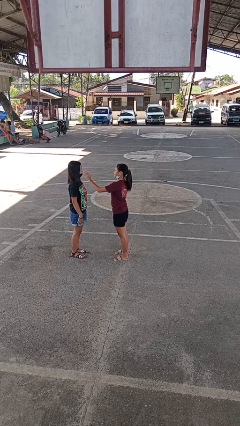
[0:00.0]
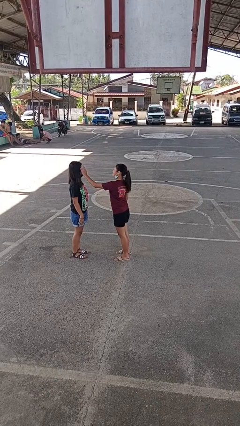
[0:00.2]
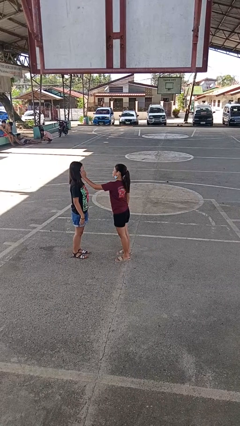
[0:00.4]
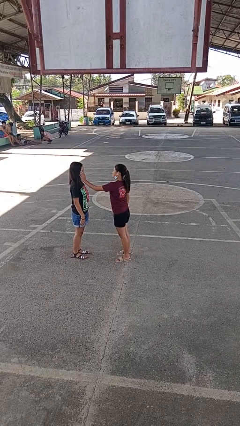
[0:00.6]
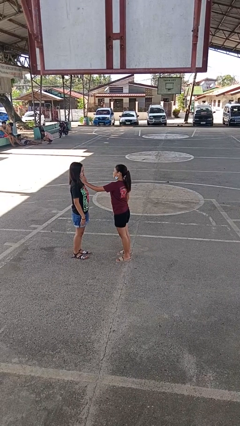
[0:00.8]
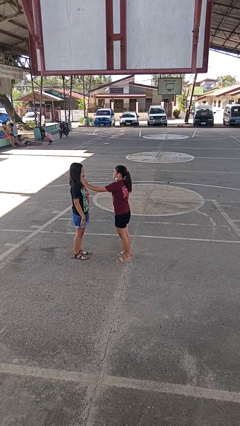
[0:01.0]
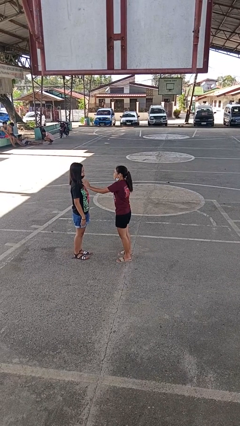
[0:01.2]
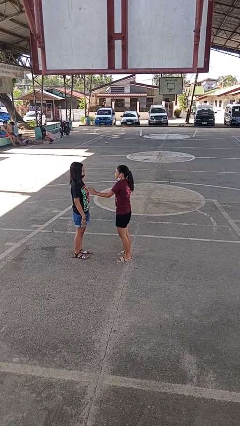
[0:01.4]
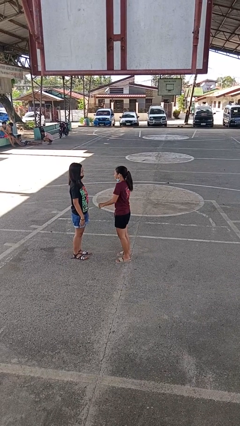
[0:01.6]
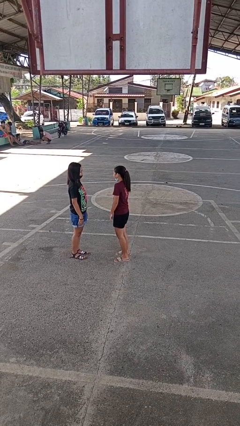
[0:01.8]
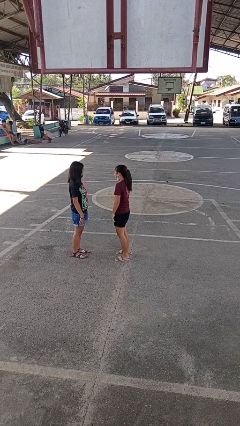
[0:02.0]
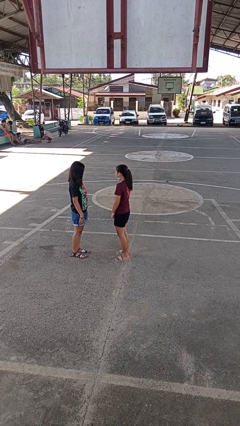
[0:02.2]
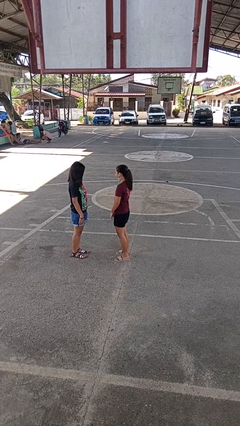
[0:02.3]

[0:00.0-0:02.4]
person touches face of person

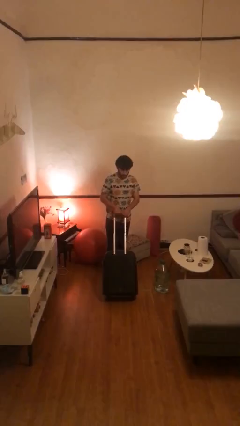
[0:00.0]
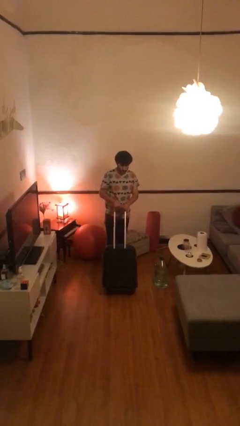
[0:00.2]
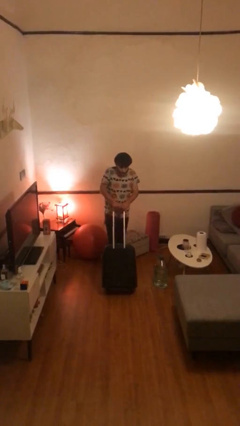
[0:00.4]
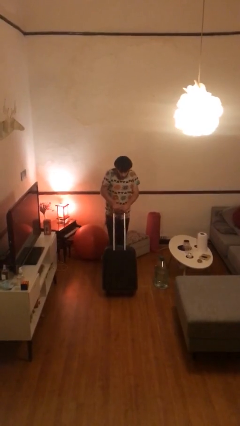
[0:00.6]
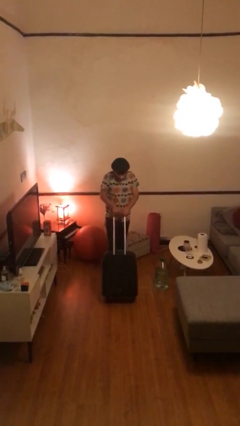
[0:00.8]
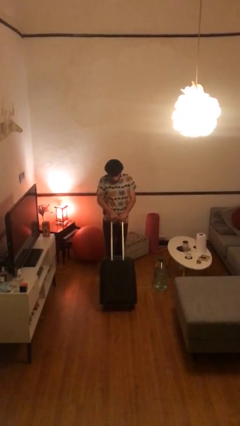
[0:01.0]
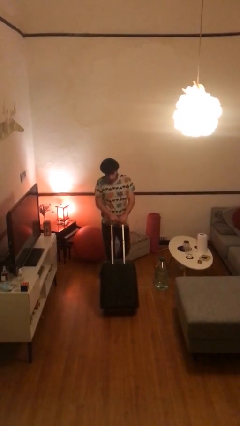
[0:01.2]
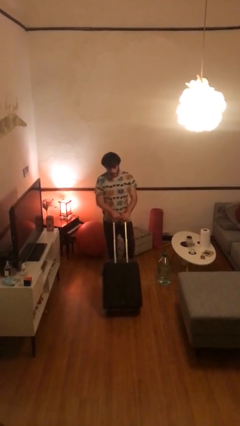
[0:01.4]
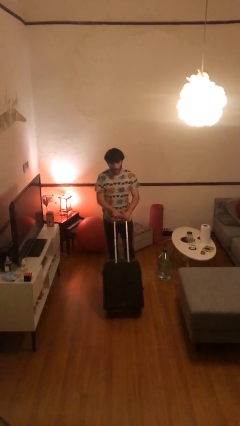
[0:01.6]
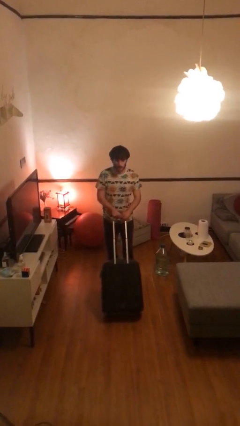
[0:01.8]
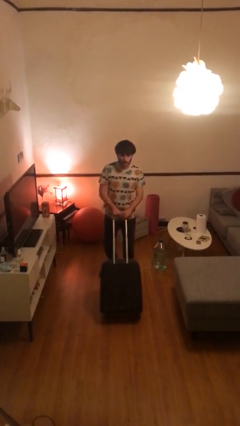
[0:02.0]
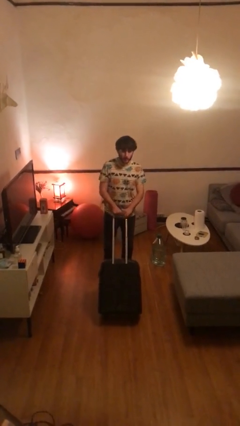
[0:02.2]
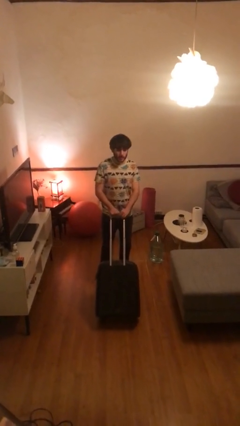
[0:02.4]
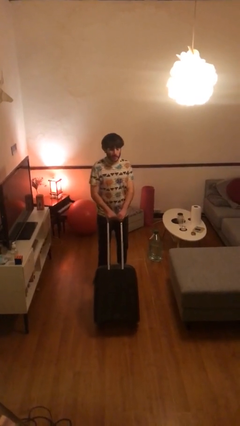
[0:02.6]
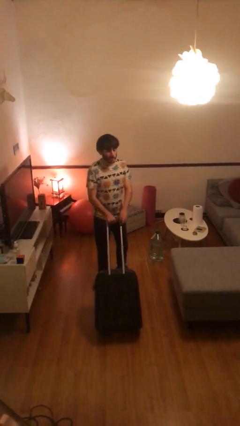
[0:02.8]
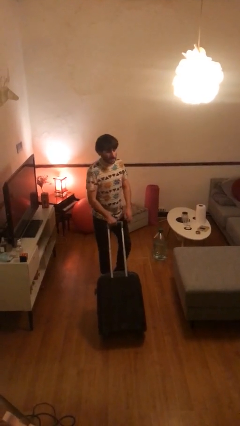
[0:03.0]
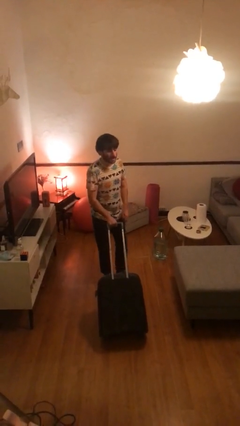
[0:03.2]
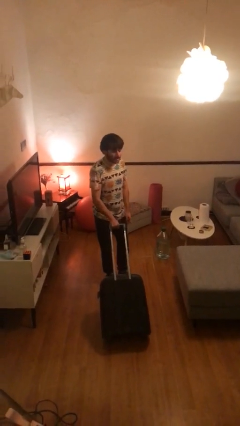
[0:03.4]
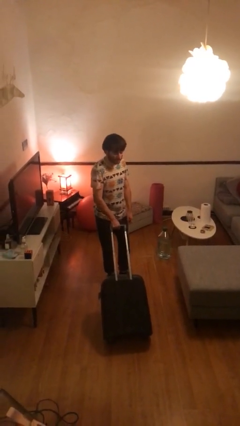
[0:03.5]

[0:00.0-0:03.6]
person pushes wheeled cart

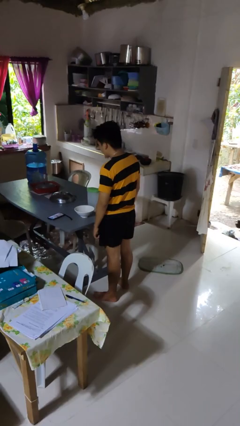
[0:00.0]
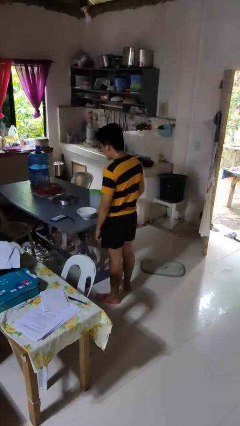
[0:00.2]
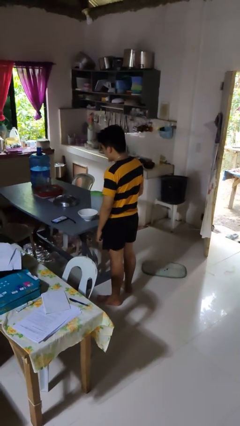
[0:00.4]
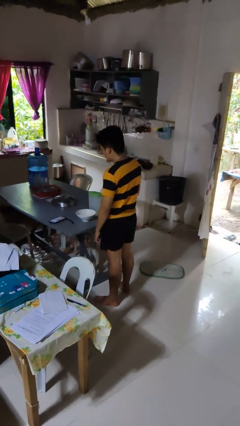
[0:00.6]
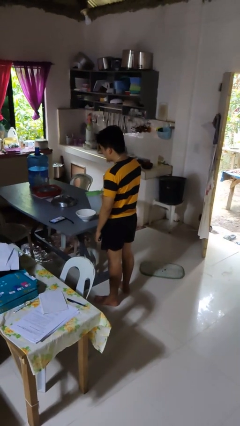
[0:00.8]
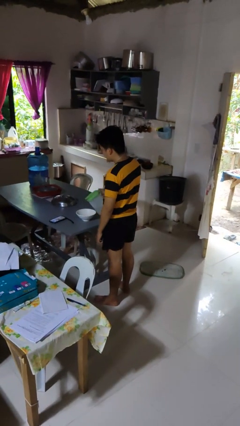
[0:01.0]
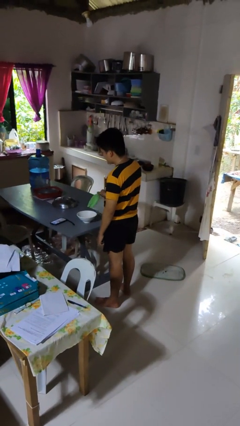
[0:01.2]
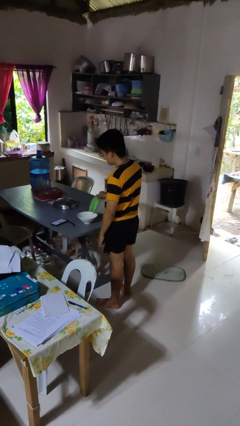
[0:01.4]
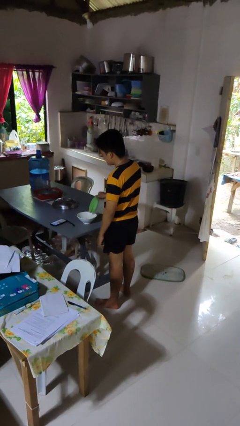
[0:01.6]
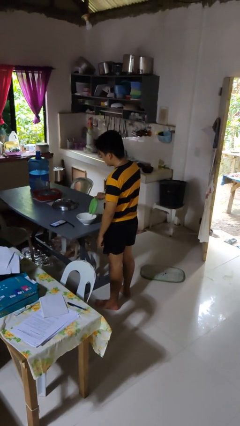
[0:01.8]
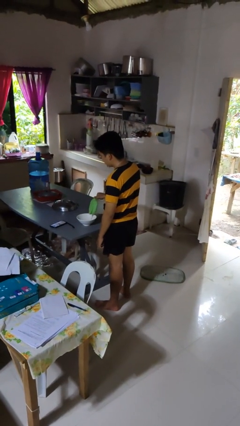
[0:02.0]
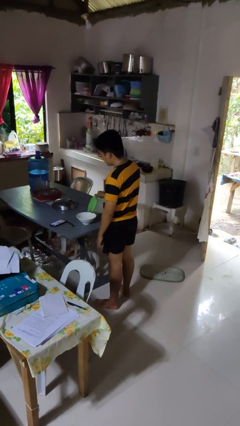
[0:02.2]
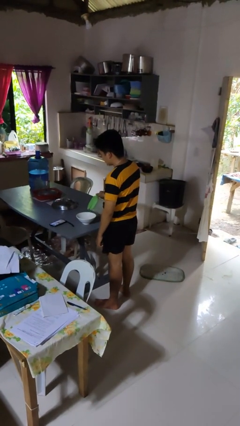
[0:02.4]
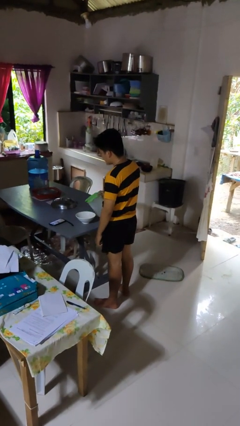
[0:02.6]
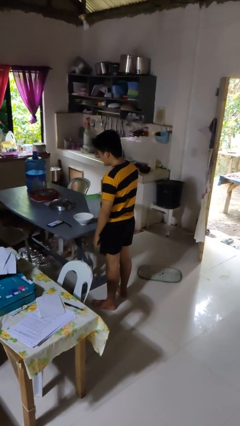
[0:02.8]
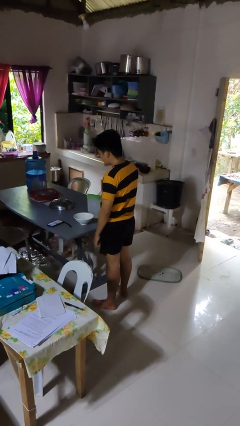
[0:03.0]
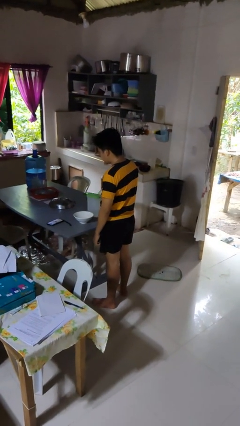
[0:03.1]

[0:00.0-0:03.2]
person pours into bowl

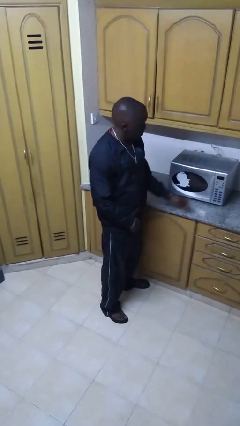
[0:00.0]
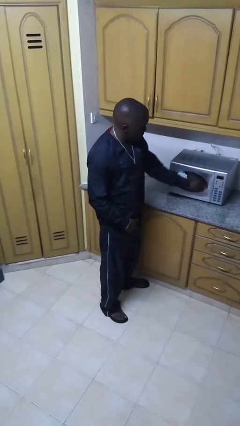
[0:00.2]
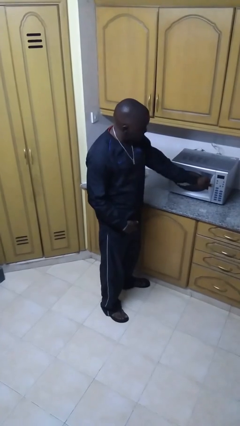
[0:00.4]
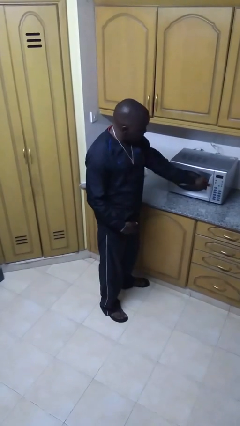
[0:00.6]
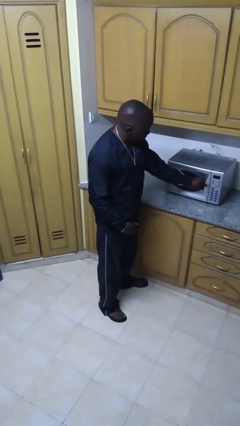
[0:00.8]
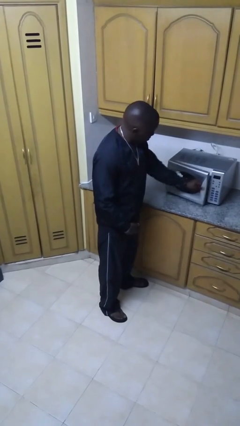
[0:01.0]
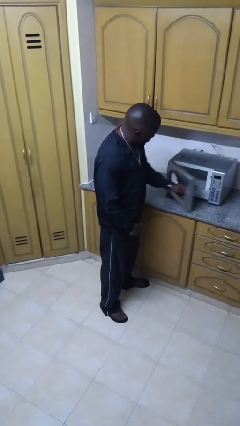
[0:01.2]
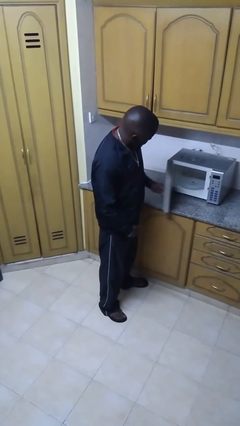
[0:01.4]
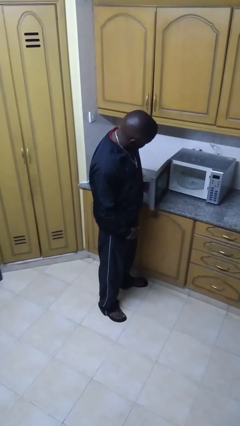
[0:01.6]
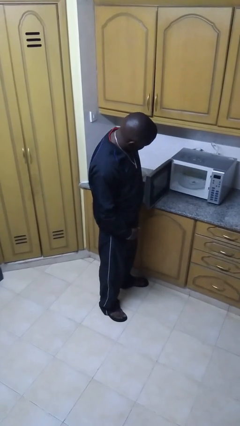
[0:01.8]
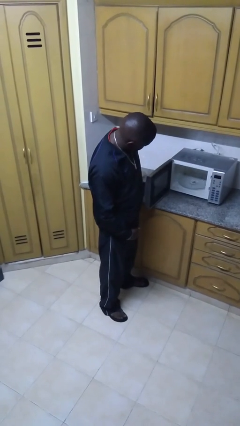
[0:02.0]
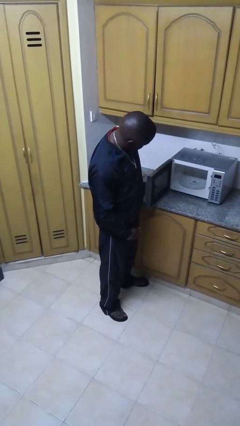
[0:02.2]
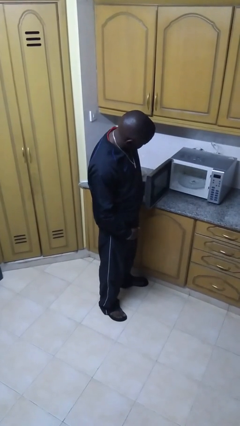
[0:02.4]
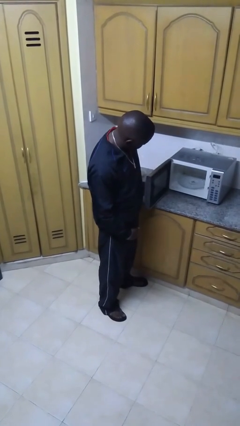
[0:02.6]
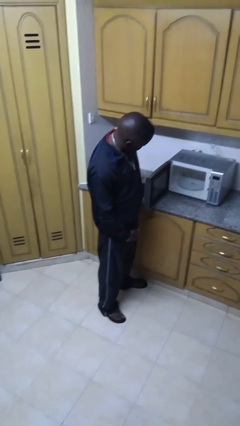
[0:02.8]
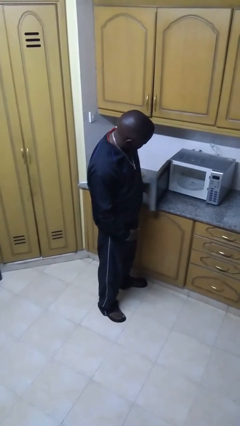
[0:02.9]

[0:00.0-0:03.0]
person opens microwave

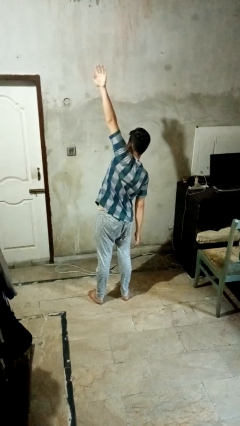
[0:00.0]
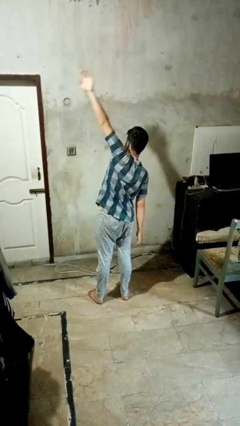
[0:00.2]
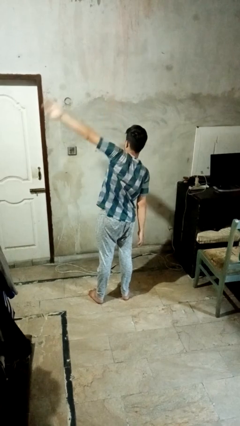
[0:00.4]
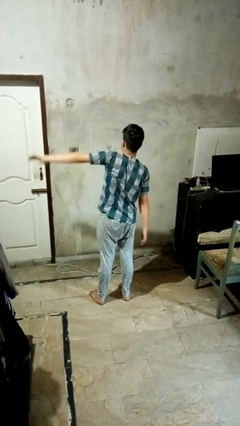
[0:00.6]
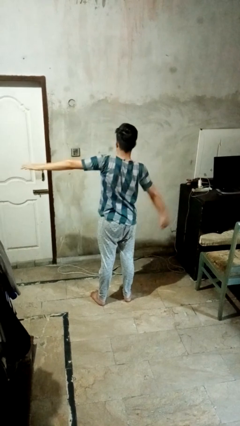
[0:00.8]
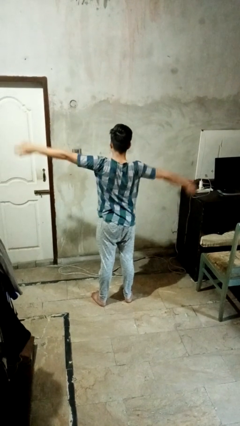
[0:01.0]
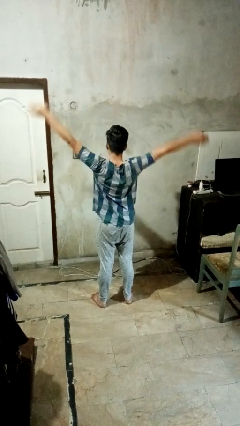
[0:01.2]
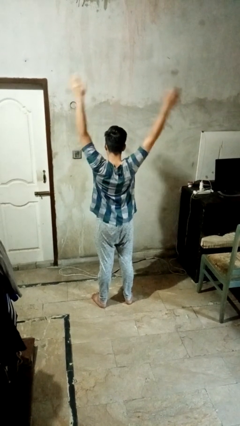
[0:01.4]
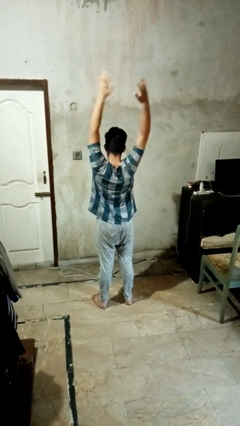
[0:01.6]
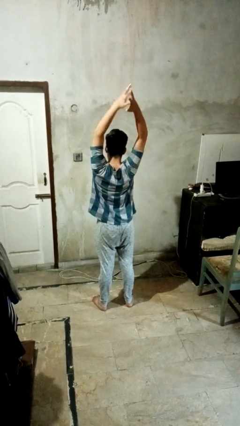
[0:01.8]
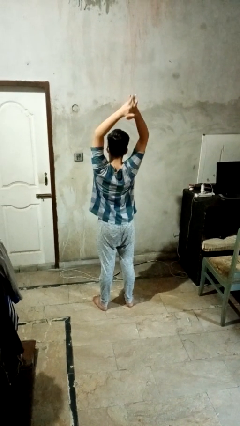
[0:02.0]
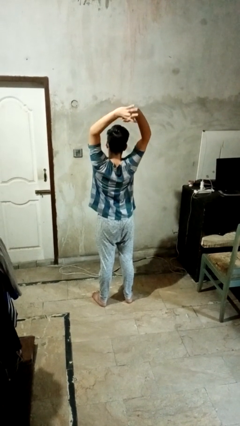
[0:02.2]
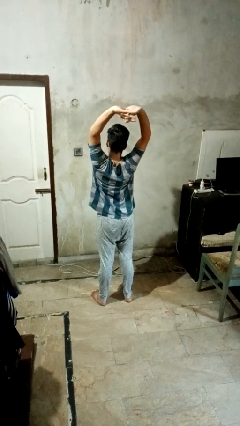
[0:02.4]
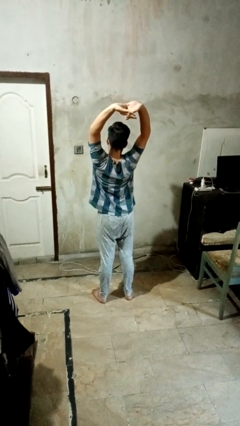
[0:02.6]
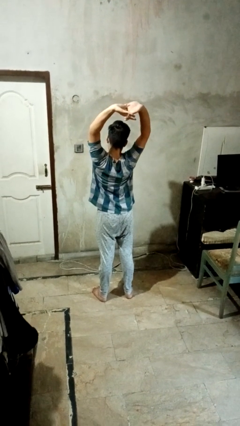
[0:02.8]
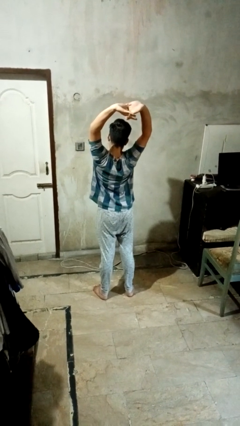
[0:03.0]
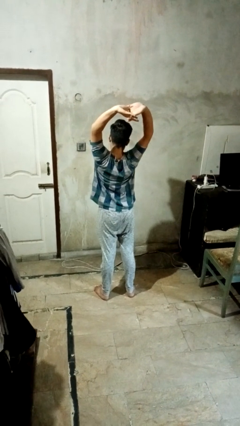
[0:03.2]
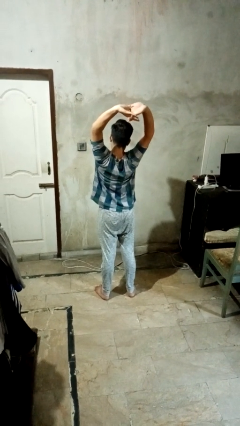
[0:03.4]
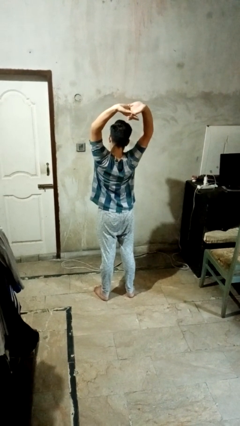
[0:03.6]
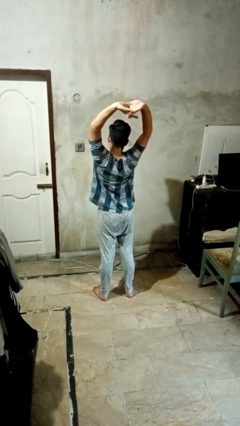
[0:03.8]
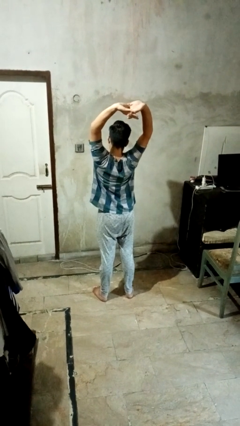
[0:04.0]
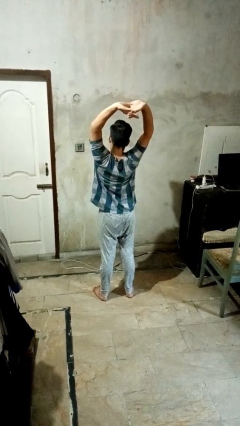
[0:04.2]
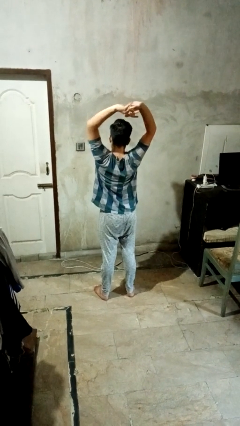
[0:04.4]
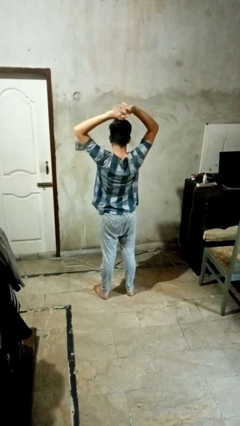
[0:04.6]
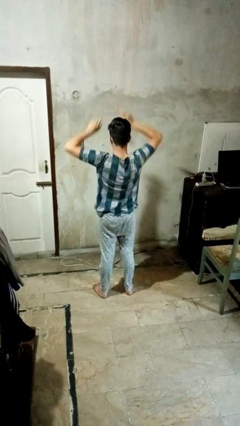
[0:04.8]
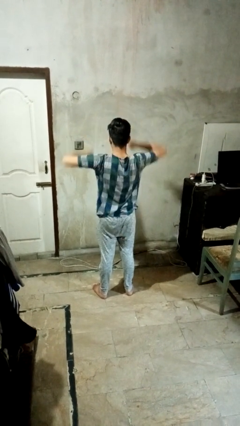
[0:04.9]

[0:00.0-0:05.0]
person stretches arms over head

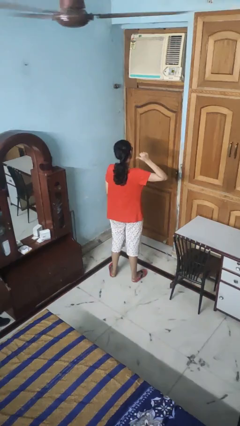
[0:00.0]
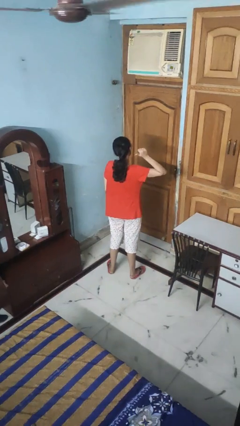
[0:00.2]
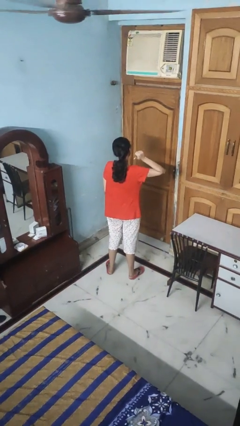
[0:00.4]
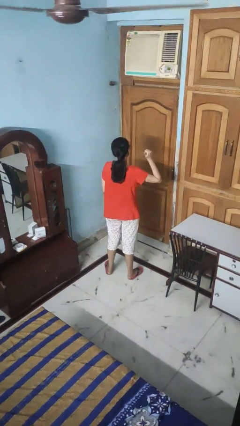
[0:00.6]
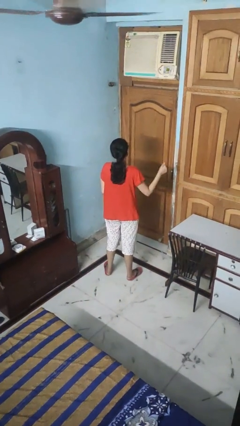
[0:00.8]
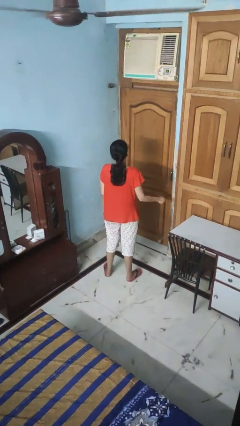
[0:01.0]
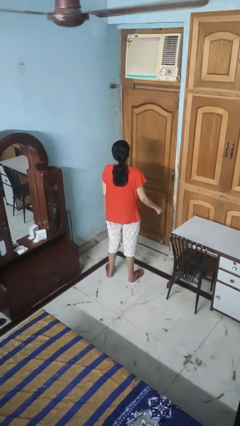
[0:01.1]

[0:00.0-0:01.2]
person gestures behind me
